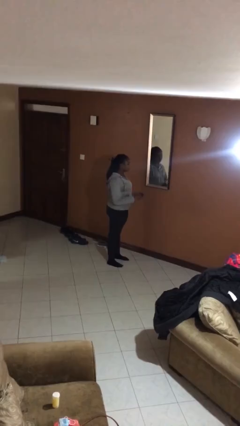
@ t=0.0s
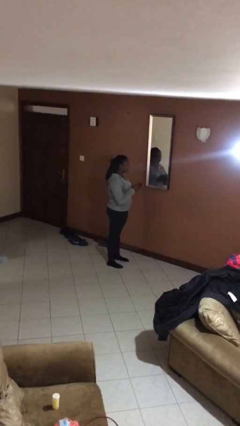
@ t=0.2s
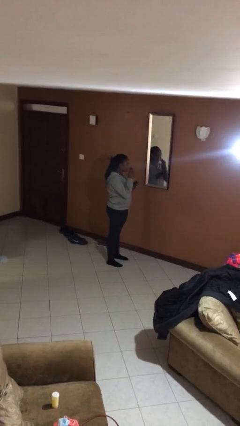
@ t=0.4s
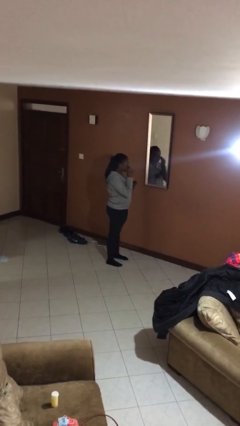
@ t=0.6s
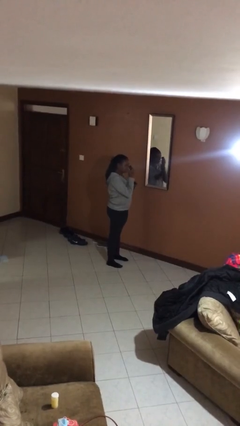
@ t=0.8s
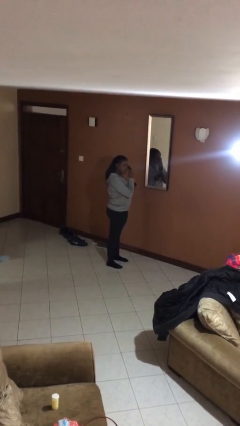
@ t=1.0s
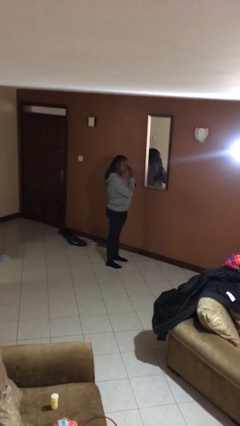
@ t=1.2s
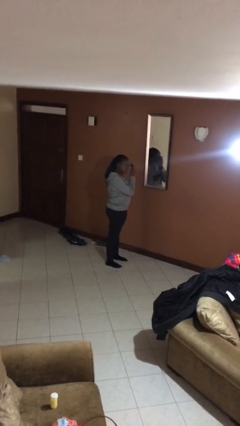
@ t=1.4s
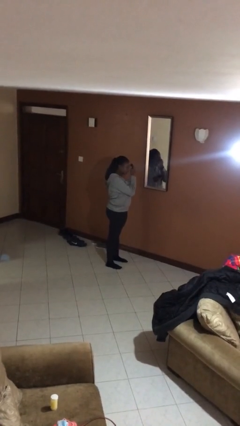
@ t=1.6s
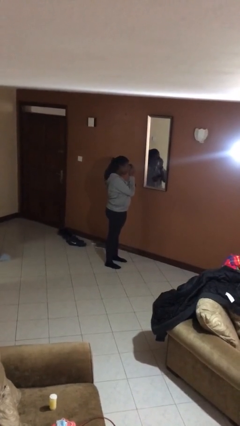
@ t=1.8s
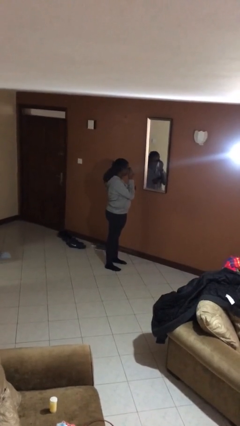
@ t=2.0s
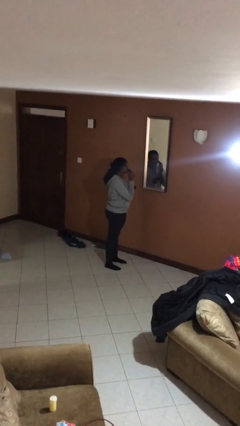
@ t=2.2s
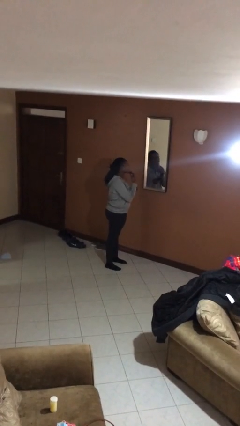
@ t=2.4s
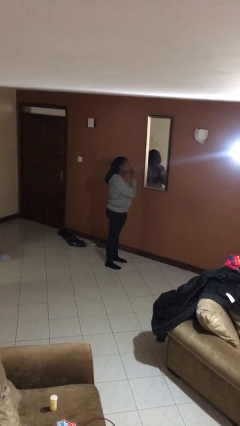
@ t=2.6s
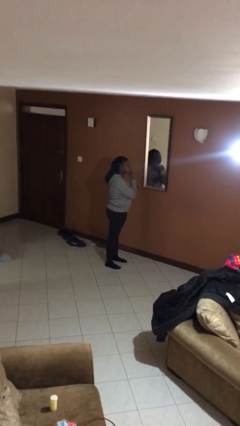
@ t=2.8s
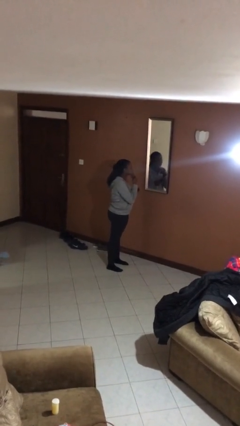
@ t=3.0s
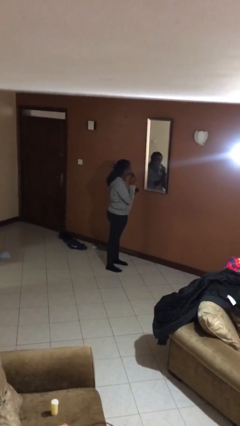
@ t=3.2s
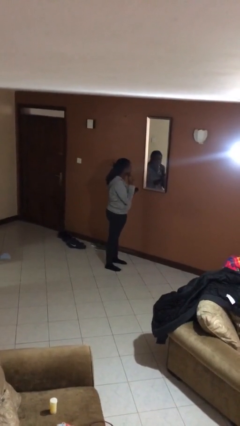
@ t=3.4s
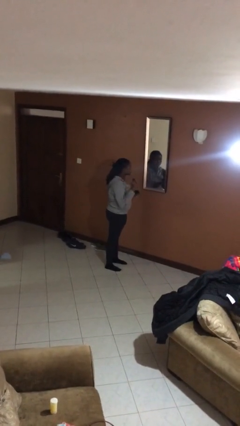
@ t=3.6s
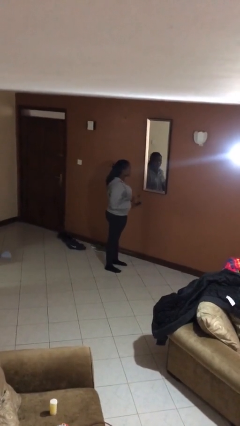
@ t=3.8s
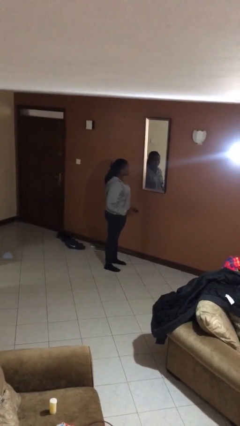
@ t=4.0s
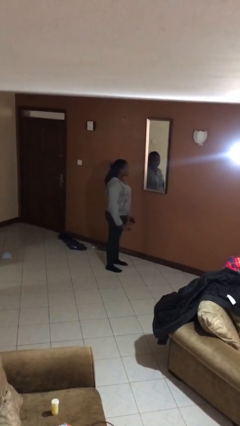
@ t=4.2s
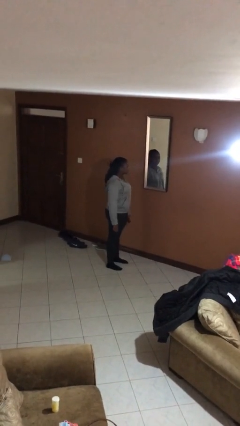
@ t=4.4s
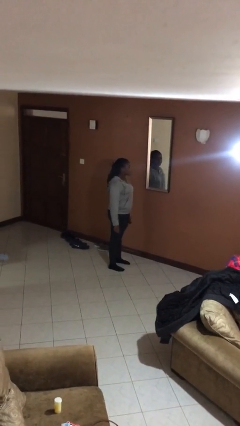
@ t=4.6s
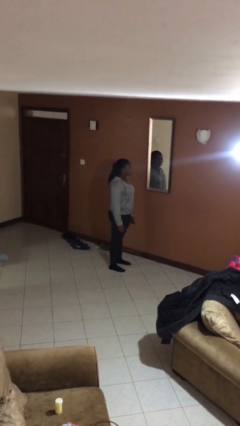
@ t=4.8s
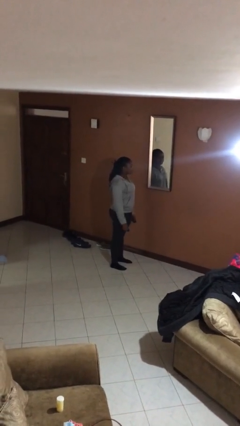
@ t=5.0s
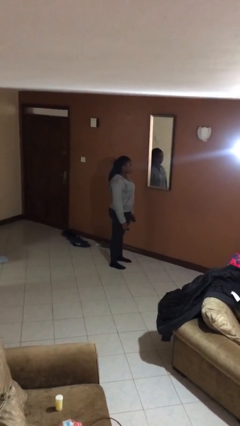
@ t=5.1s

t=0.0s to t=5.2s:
person applies foundation makeup

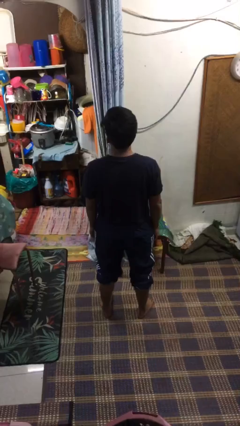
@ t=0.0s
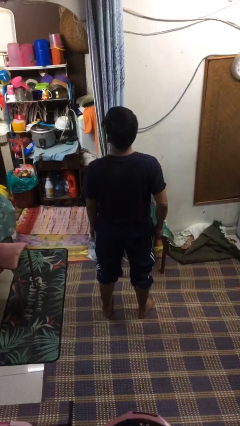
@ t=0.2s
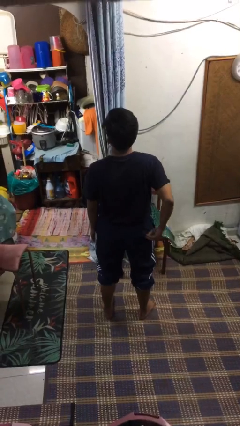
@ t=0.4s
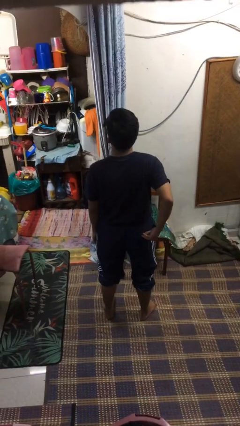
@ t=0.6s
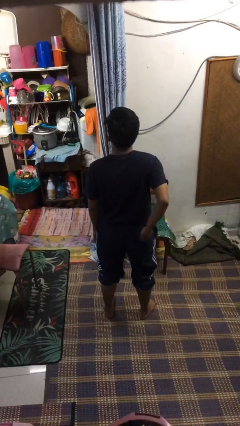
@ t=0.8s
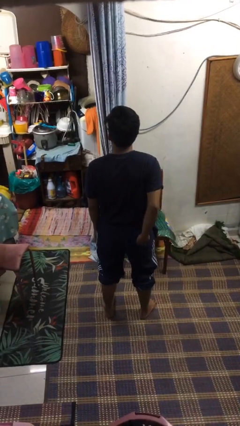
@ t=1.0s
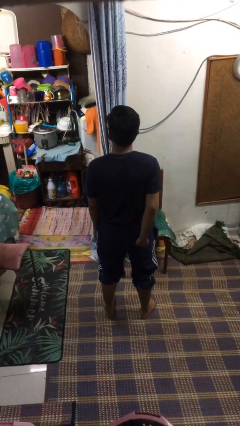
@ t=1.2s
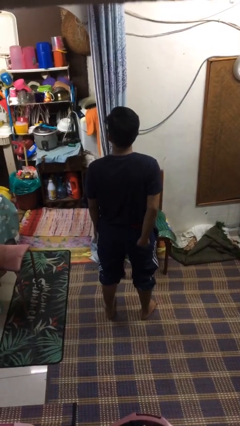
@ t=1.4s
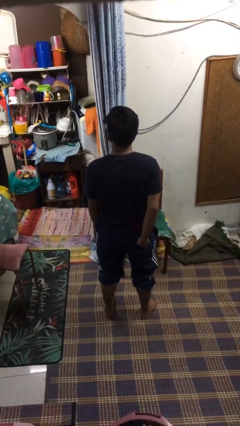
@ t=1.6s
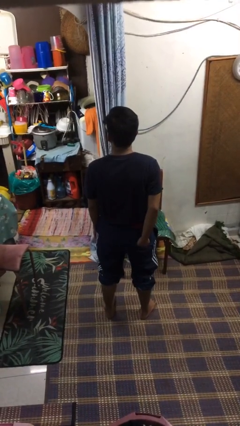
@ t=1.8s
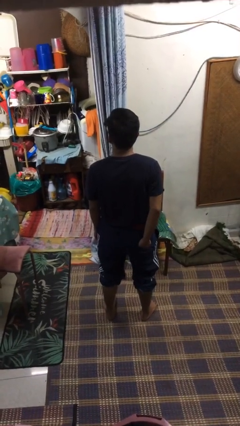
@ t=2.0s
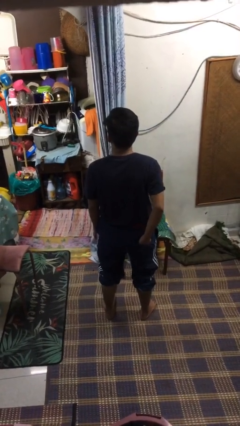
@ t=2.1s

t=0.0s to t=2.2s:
person puts hands in back pockets

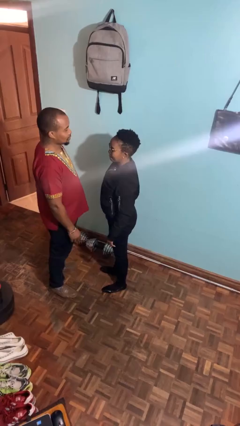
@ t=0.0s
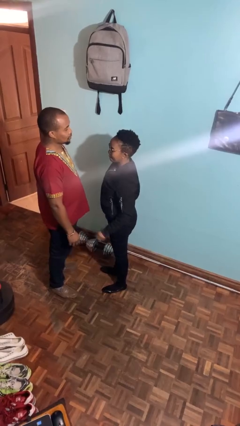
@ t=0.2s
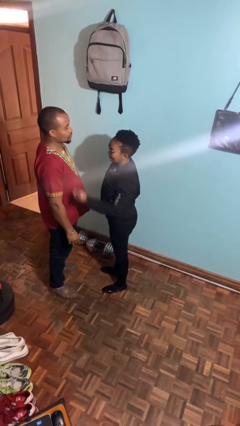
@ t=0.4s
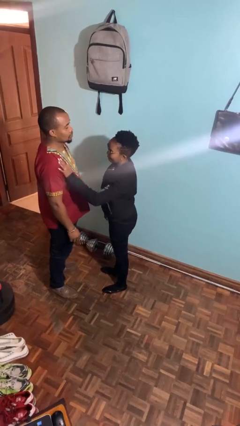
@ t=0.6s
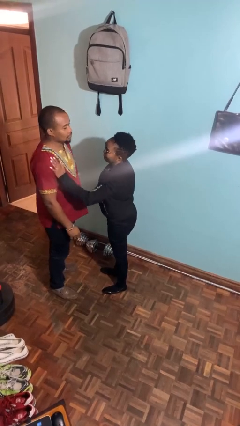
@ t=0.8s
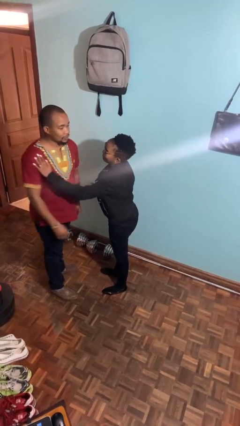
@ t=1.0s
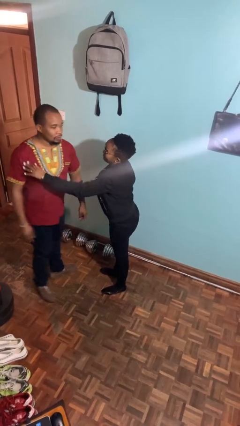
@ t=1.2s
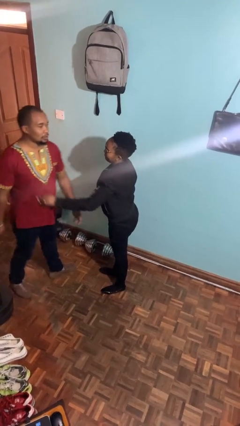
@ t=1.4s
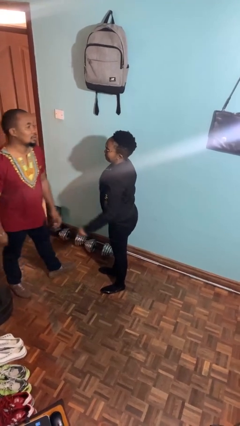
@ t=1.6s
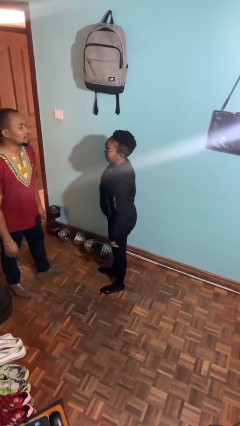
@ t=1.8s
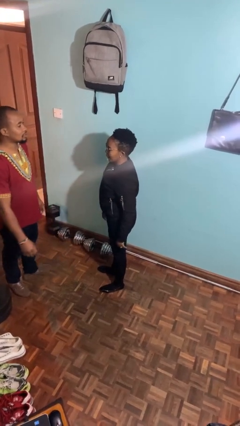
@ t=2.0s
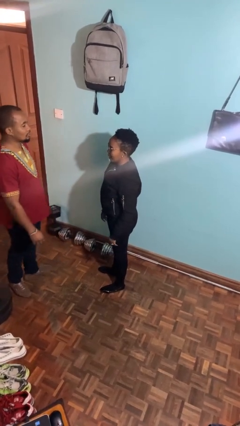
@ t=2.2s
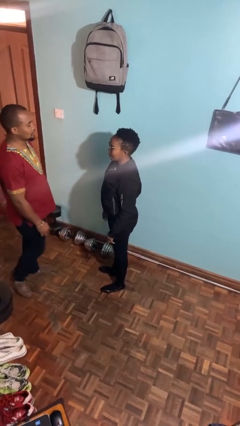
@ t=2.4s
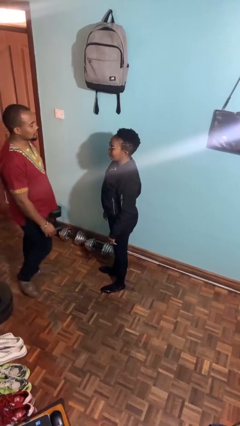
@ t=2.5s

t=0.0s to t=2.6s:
person shoves person

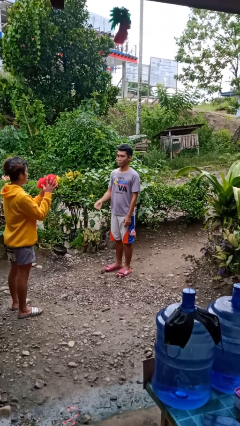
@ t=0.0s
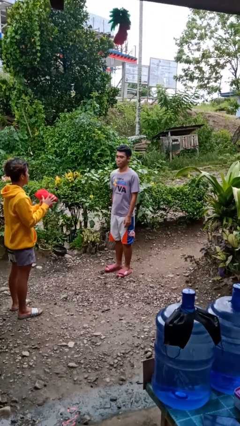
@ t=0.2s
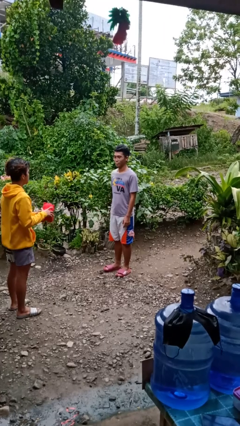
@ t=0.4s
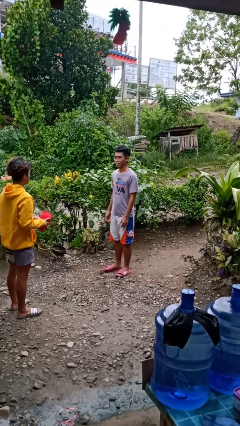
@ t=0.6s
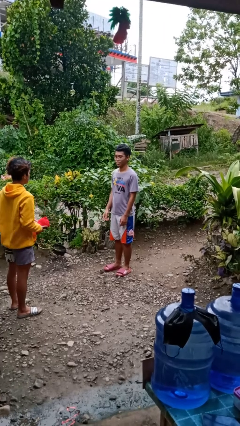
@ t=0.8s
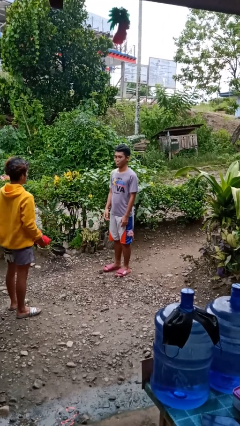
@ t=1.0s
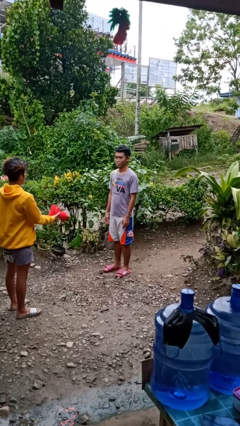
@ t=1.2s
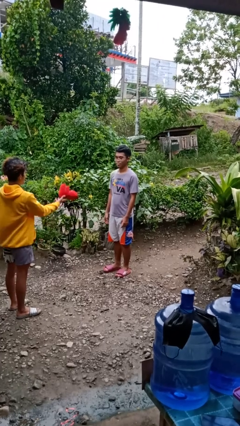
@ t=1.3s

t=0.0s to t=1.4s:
person throws object to person

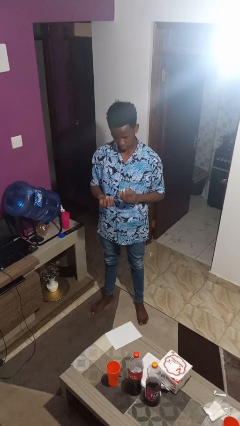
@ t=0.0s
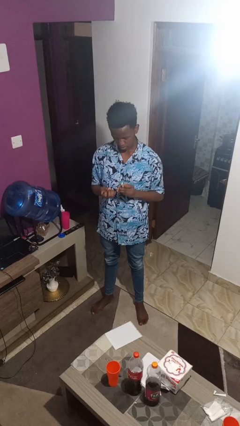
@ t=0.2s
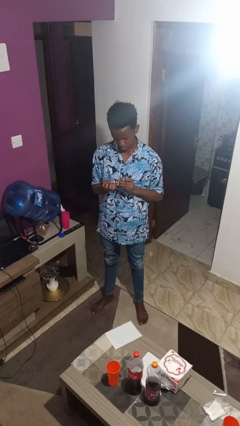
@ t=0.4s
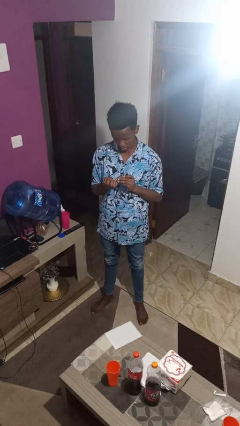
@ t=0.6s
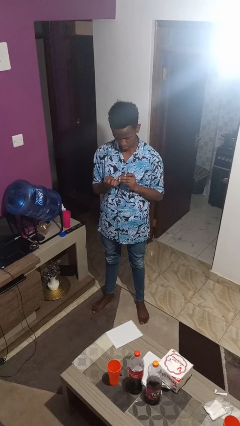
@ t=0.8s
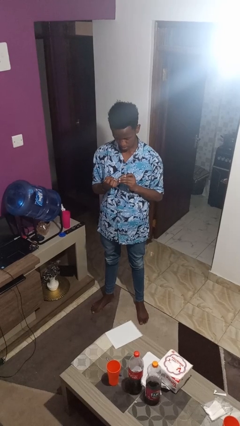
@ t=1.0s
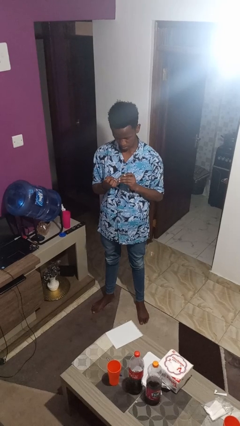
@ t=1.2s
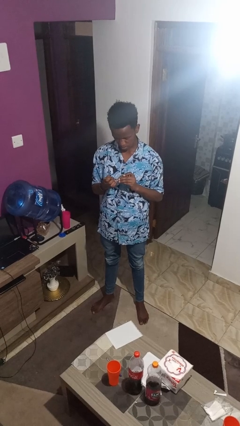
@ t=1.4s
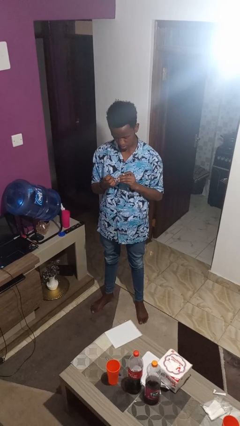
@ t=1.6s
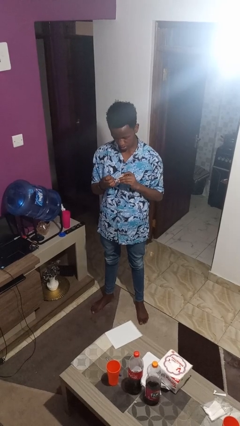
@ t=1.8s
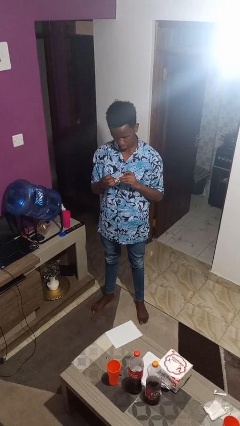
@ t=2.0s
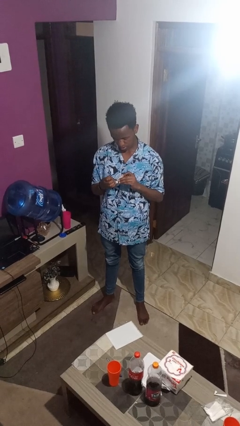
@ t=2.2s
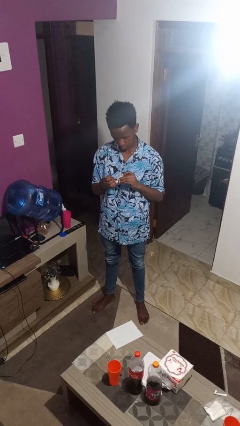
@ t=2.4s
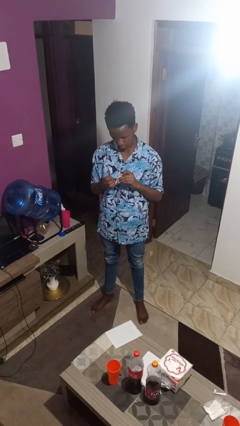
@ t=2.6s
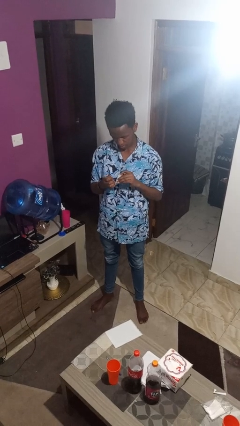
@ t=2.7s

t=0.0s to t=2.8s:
person clips fingernails

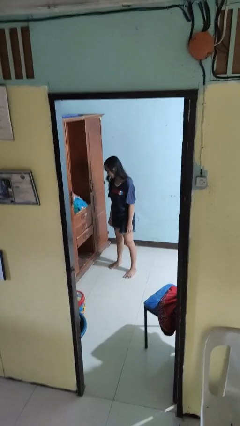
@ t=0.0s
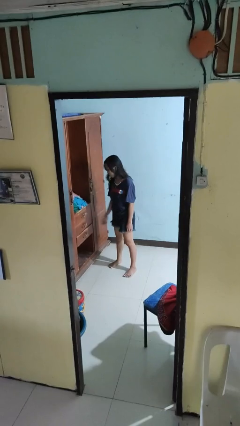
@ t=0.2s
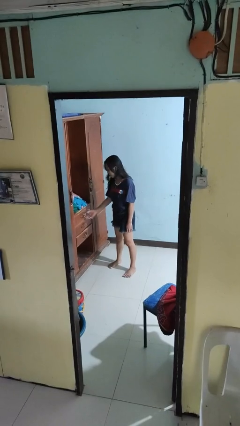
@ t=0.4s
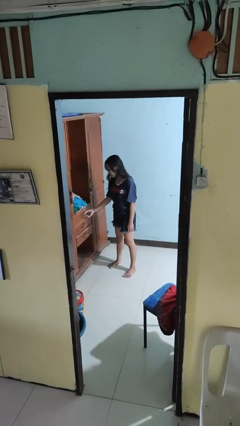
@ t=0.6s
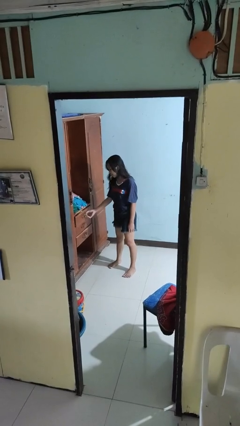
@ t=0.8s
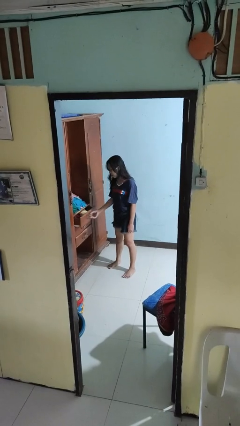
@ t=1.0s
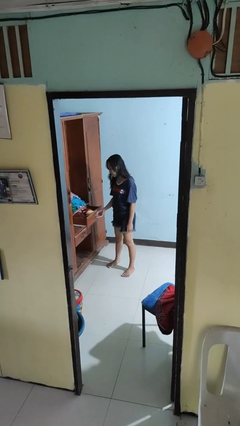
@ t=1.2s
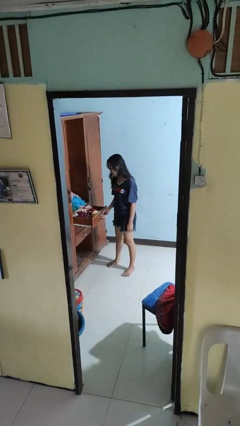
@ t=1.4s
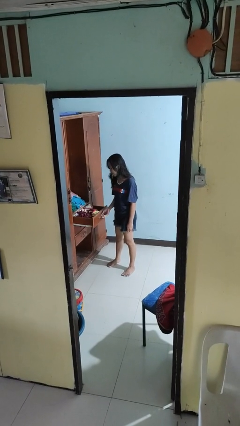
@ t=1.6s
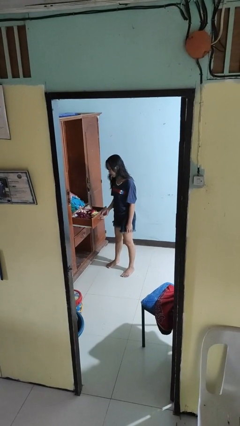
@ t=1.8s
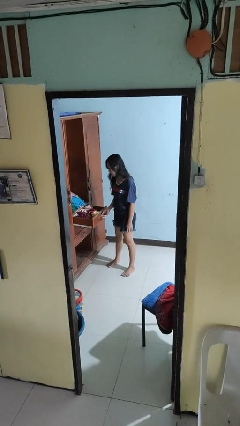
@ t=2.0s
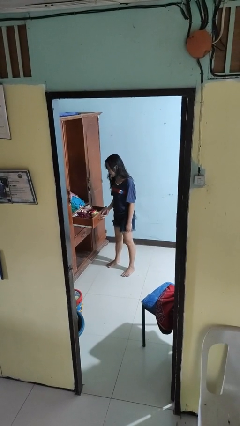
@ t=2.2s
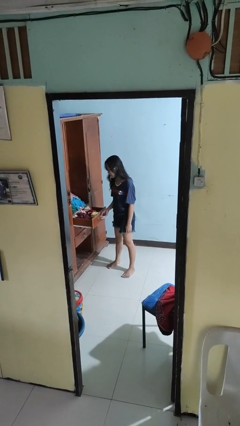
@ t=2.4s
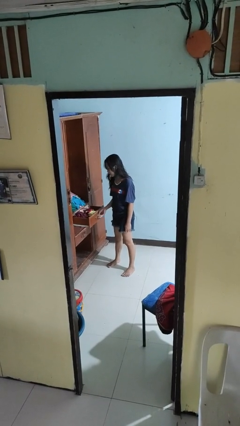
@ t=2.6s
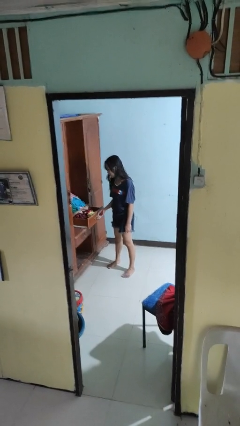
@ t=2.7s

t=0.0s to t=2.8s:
person opens dresser drawer
